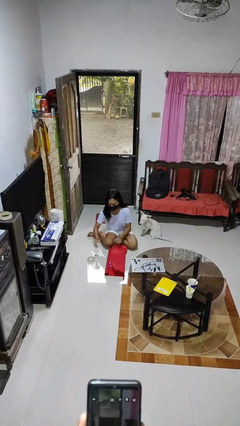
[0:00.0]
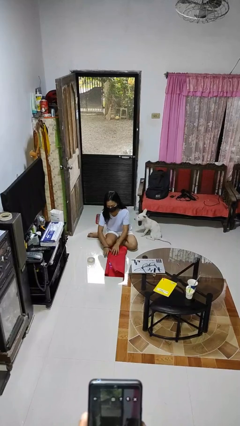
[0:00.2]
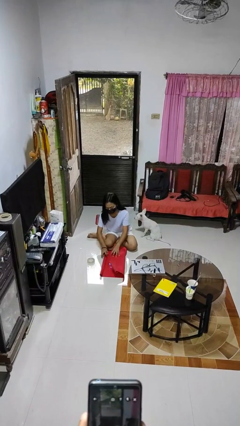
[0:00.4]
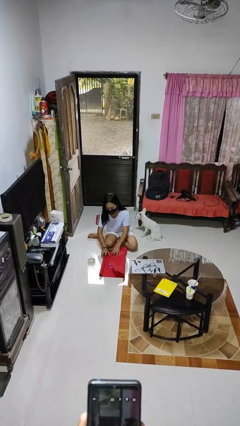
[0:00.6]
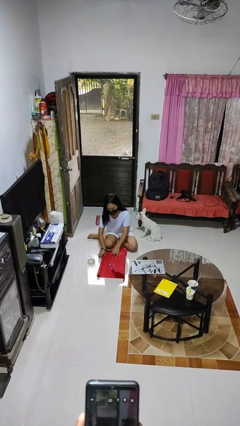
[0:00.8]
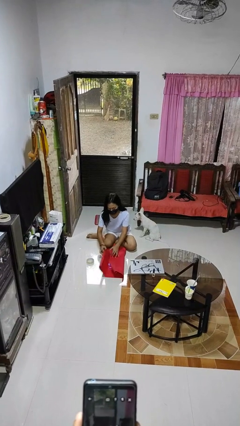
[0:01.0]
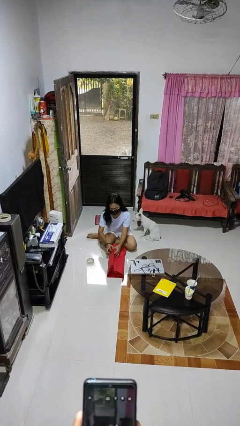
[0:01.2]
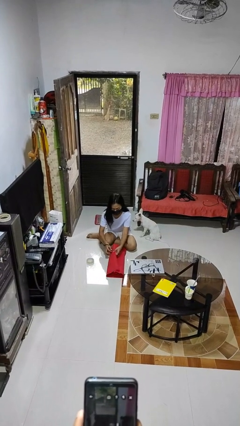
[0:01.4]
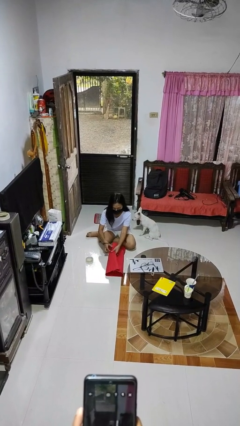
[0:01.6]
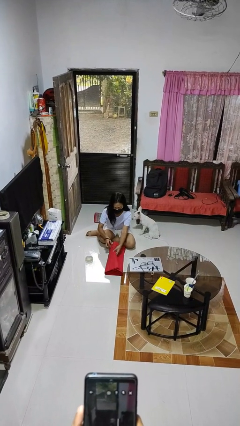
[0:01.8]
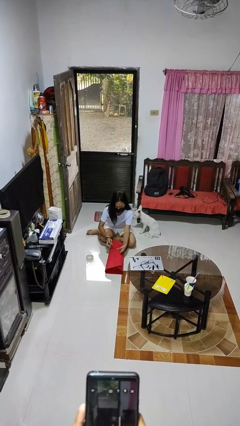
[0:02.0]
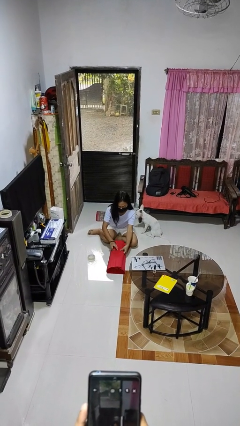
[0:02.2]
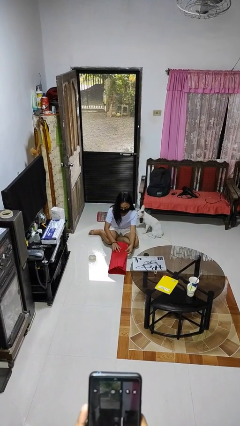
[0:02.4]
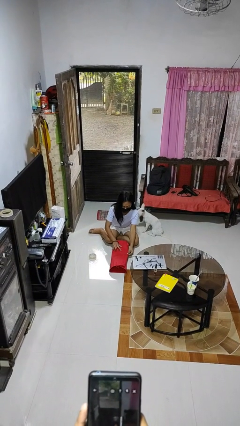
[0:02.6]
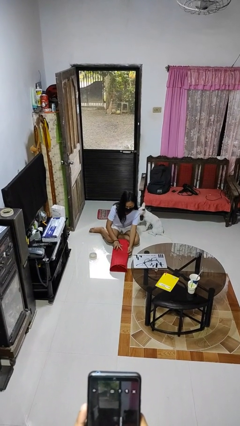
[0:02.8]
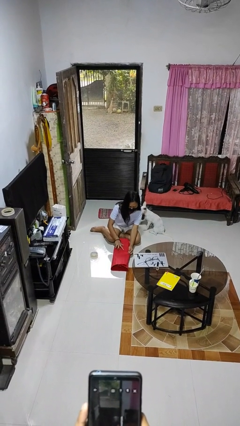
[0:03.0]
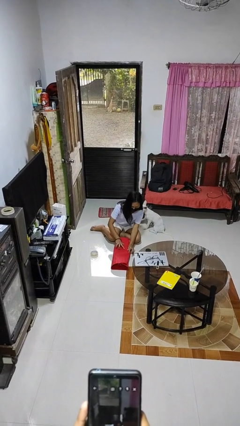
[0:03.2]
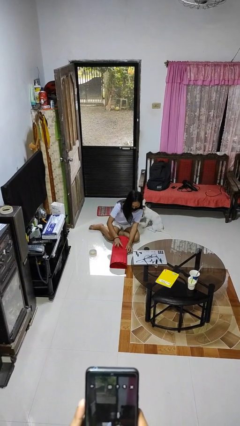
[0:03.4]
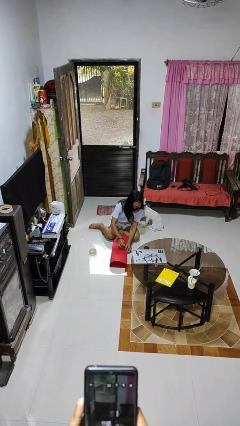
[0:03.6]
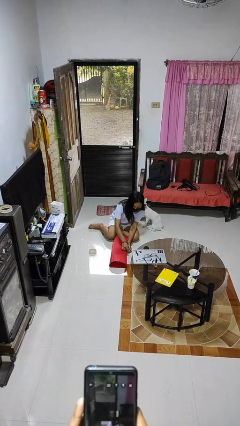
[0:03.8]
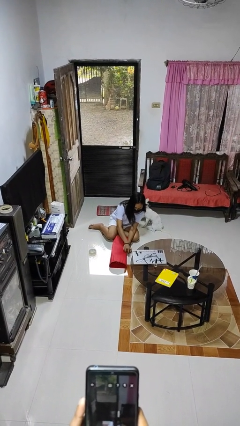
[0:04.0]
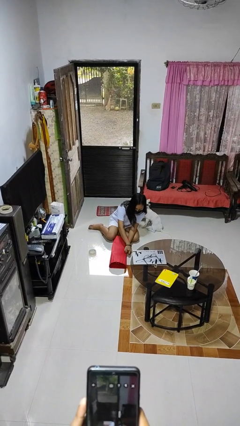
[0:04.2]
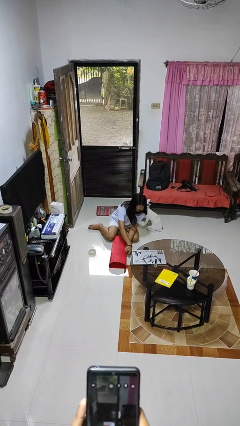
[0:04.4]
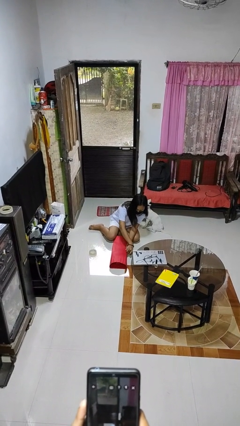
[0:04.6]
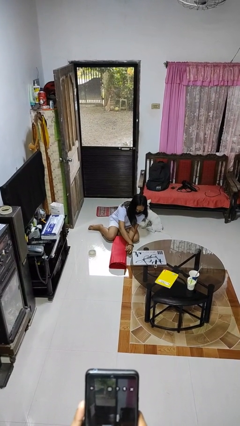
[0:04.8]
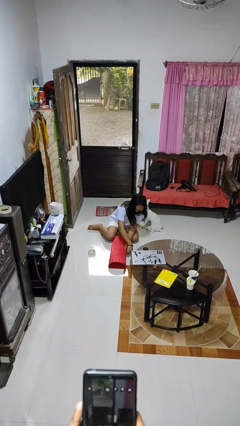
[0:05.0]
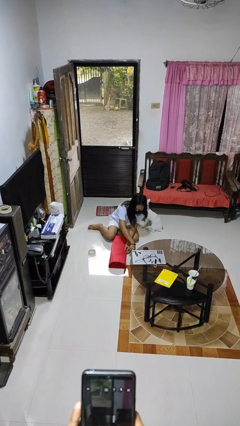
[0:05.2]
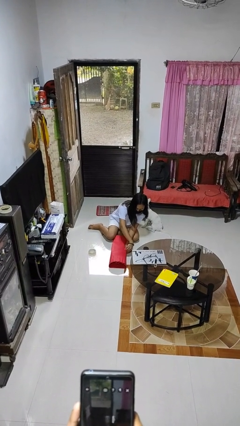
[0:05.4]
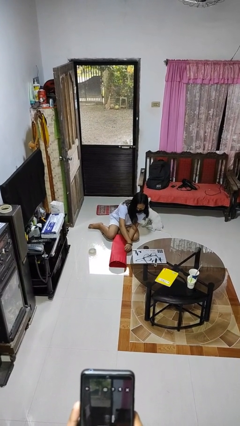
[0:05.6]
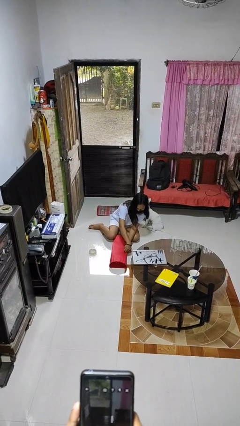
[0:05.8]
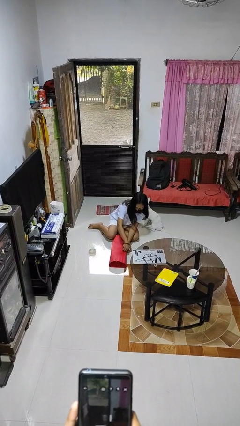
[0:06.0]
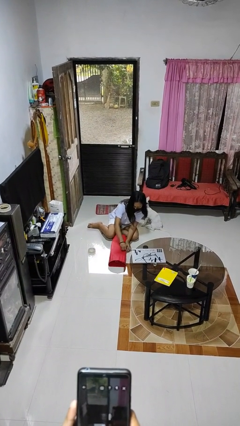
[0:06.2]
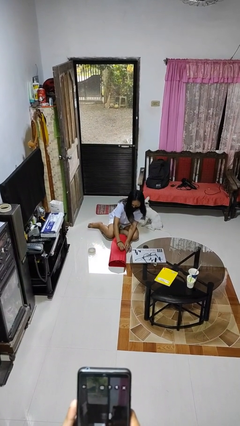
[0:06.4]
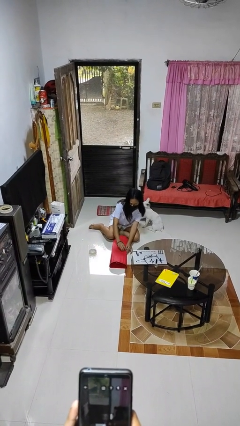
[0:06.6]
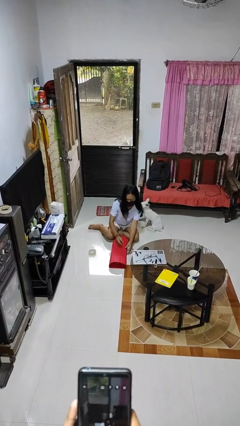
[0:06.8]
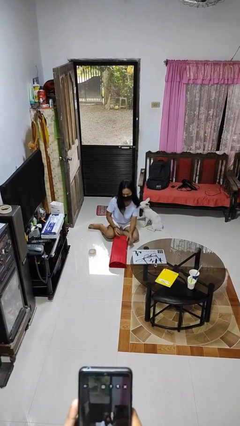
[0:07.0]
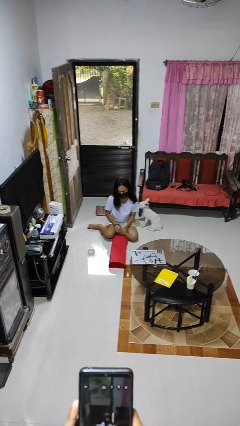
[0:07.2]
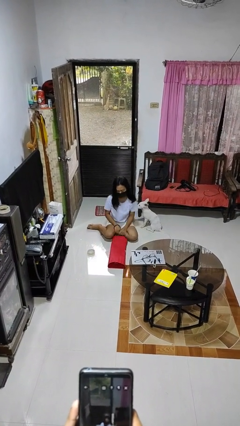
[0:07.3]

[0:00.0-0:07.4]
person wraps box

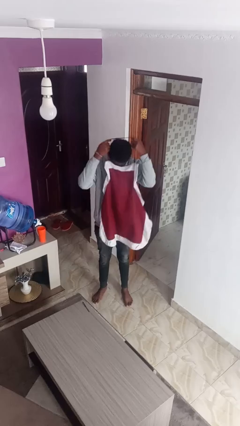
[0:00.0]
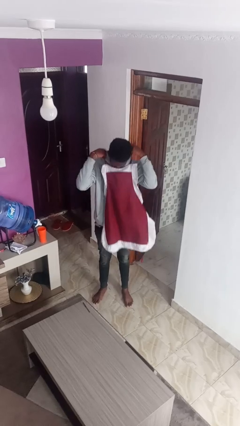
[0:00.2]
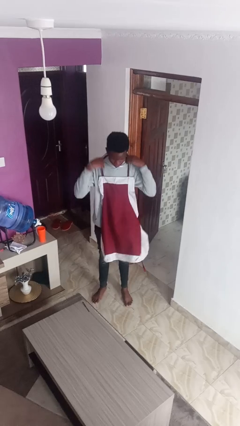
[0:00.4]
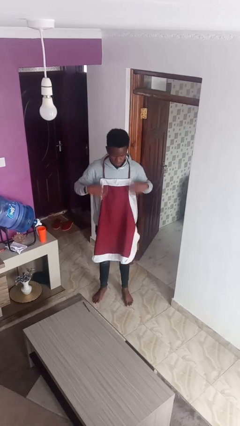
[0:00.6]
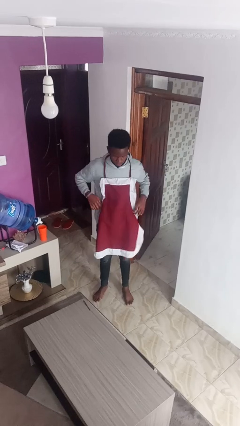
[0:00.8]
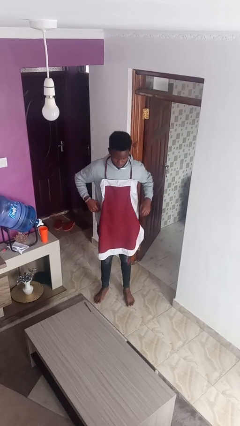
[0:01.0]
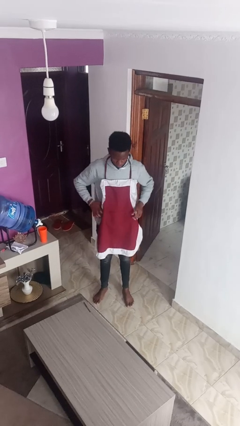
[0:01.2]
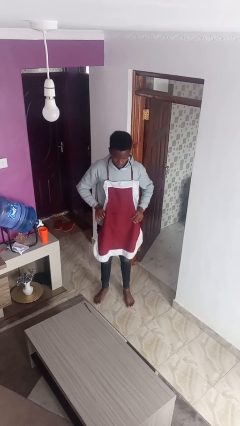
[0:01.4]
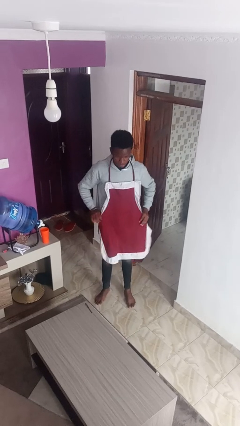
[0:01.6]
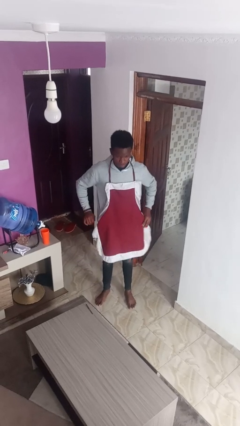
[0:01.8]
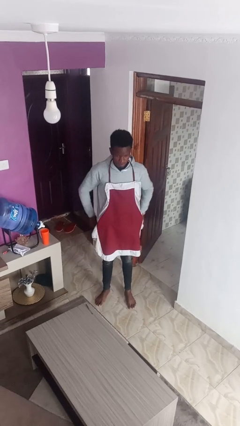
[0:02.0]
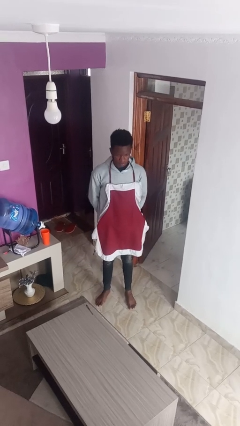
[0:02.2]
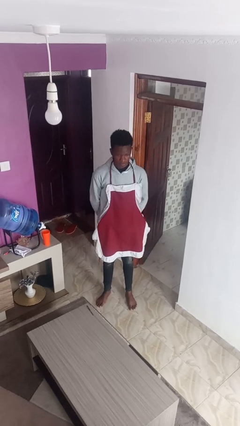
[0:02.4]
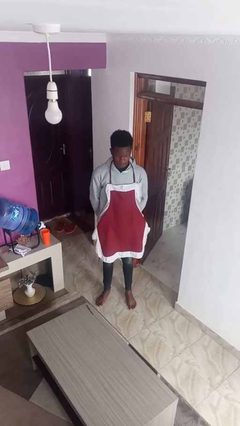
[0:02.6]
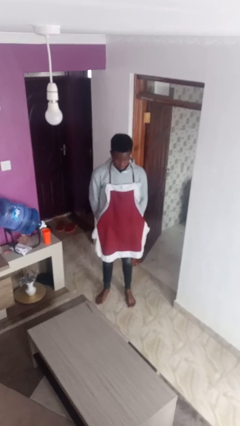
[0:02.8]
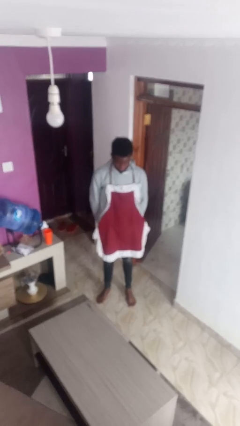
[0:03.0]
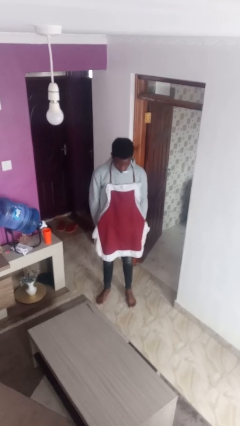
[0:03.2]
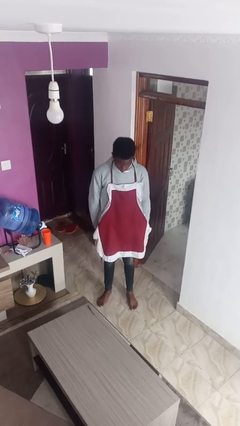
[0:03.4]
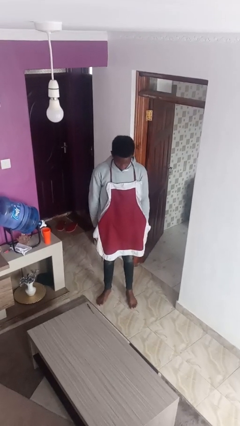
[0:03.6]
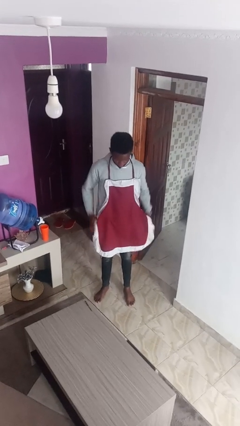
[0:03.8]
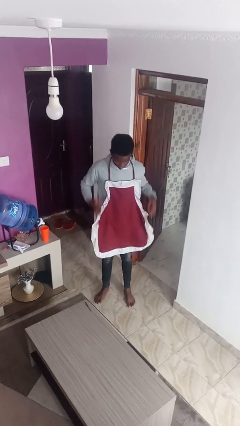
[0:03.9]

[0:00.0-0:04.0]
person puts on apron

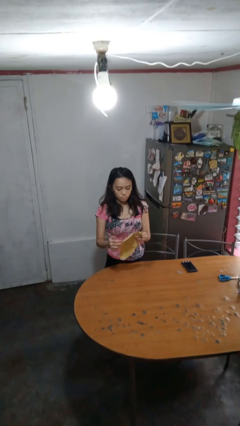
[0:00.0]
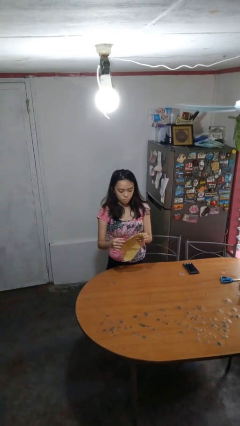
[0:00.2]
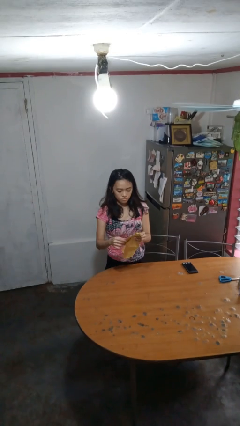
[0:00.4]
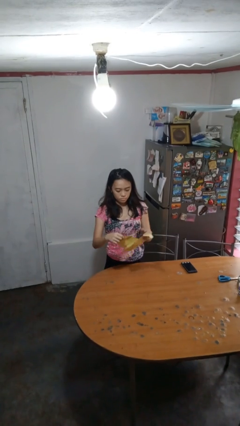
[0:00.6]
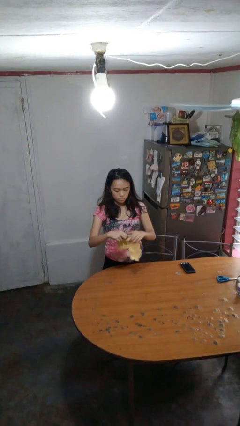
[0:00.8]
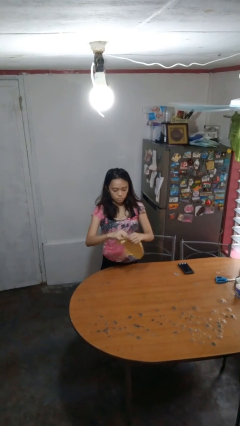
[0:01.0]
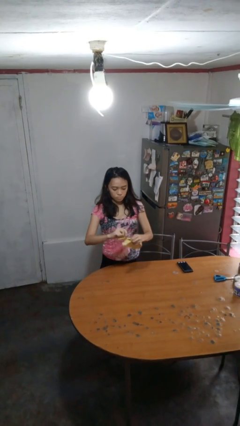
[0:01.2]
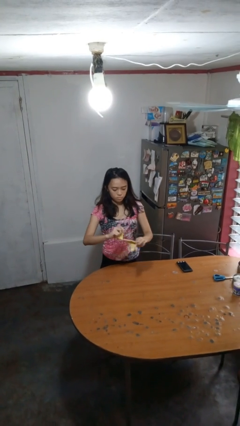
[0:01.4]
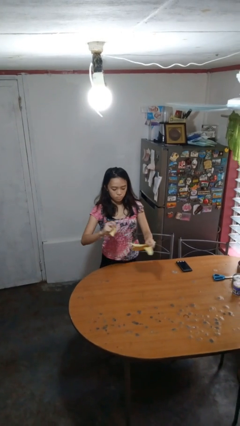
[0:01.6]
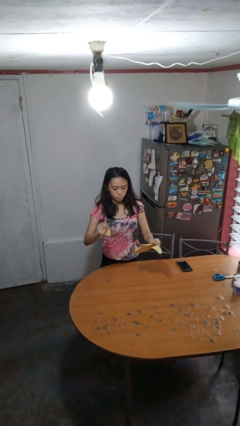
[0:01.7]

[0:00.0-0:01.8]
person tears paper

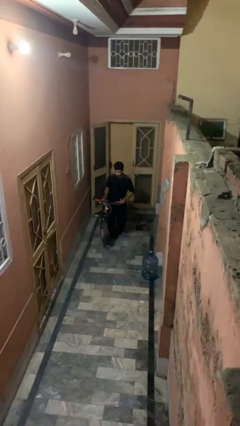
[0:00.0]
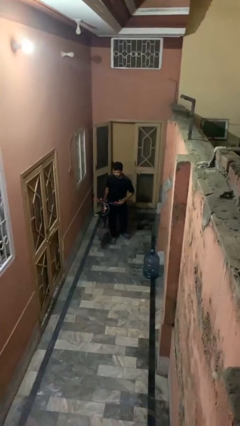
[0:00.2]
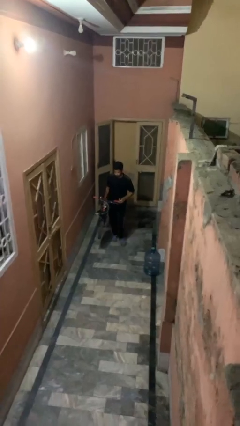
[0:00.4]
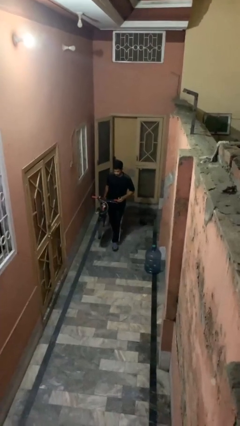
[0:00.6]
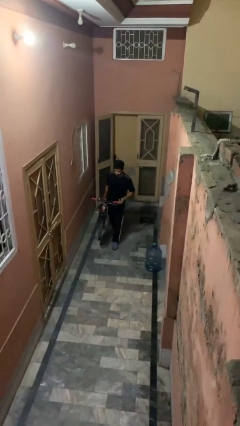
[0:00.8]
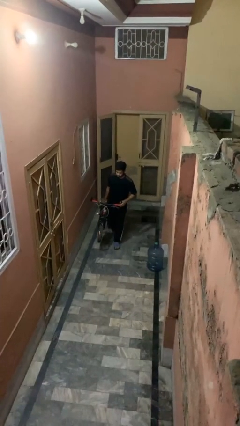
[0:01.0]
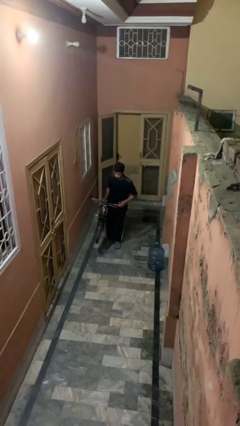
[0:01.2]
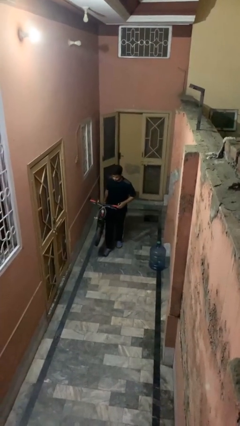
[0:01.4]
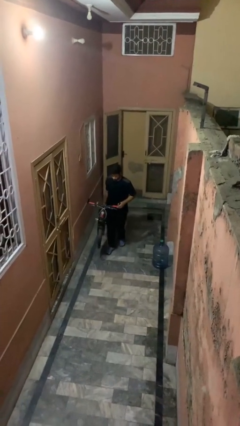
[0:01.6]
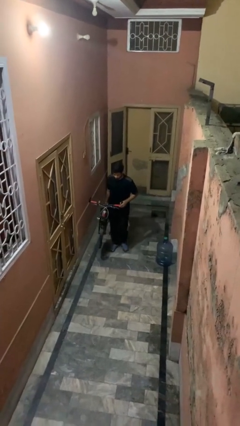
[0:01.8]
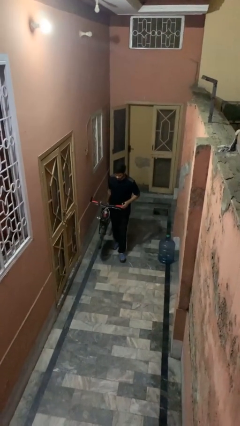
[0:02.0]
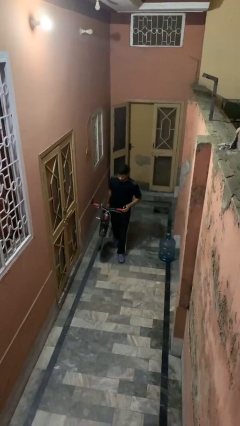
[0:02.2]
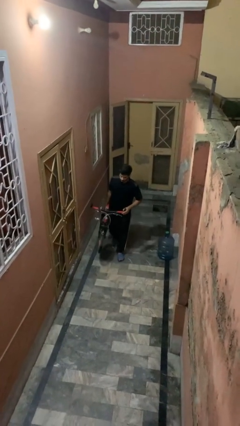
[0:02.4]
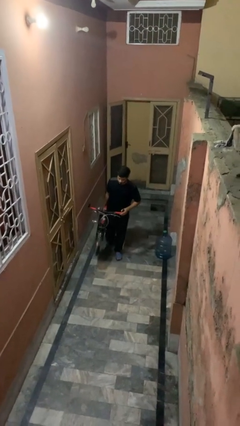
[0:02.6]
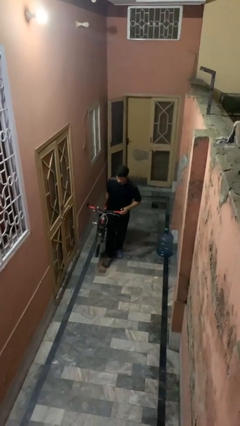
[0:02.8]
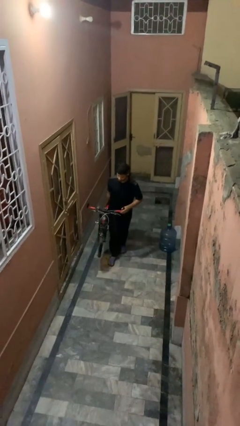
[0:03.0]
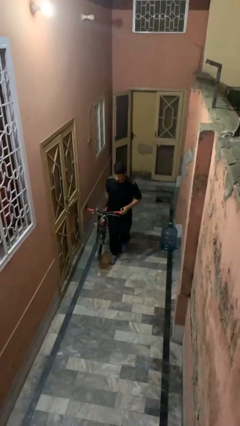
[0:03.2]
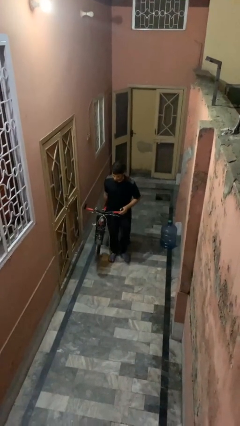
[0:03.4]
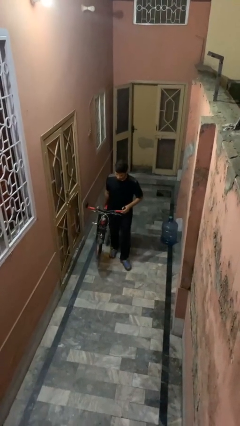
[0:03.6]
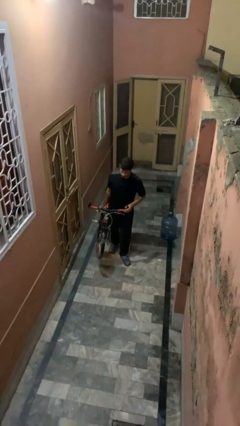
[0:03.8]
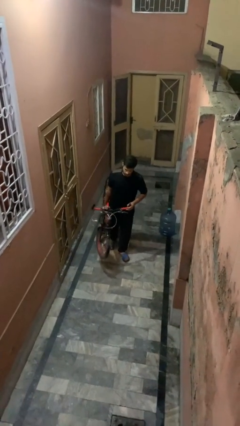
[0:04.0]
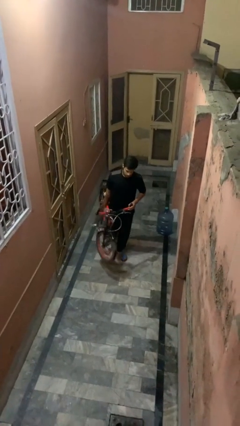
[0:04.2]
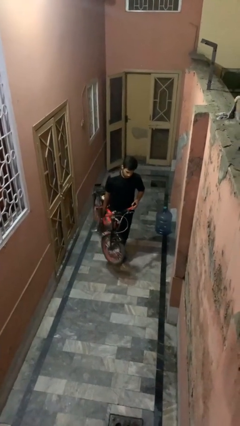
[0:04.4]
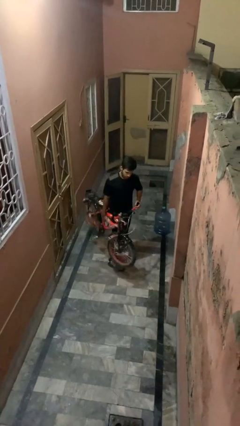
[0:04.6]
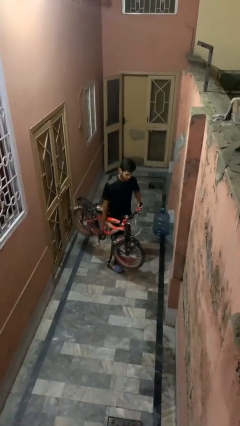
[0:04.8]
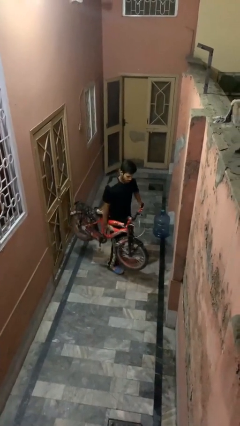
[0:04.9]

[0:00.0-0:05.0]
person carries bicycle
